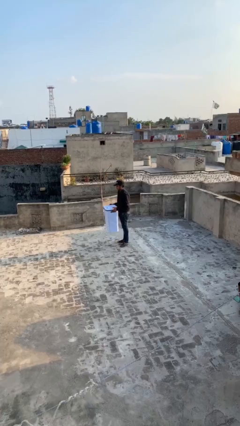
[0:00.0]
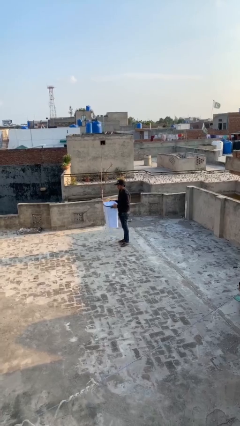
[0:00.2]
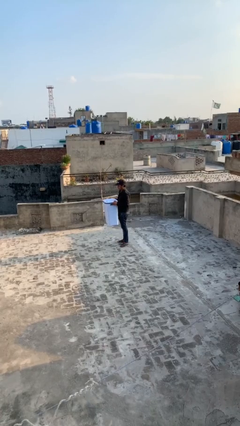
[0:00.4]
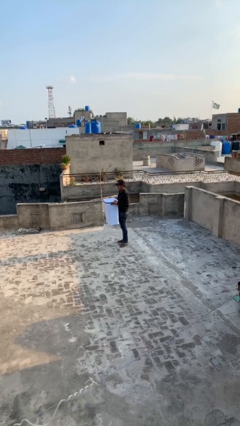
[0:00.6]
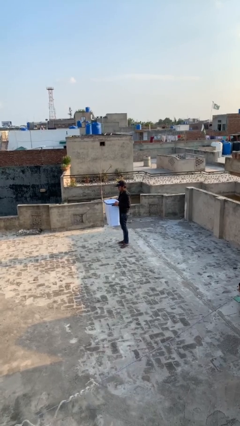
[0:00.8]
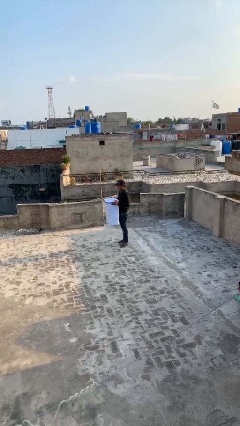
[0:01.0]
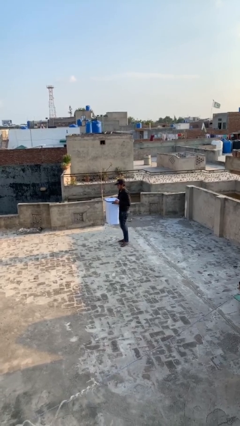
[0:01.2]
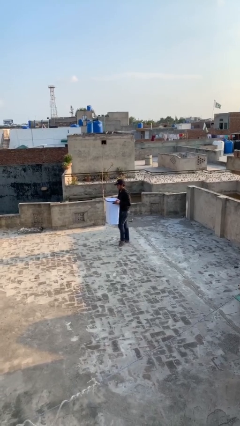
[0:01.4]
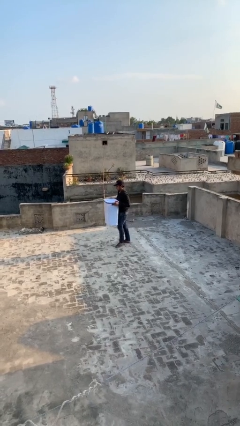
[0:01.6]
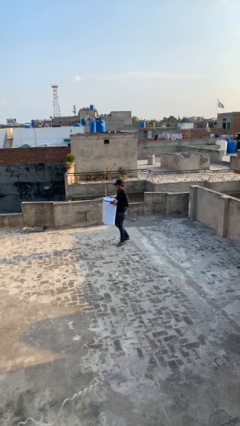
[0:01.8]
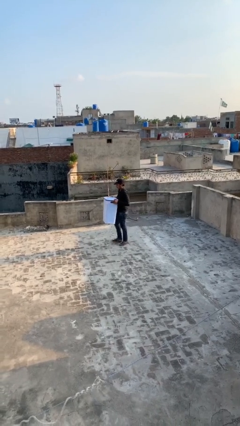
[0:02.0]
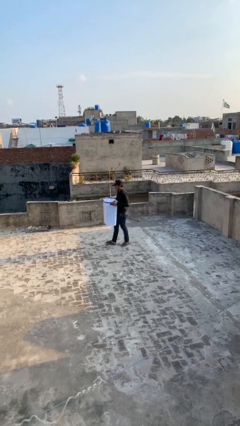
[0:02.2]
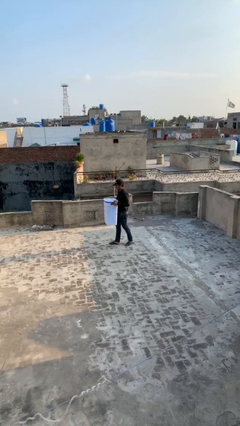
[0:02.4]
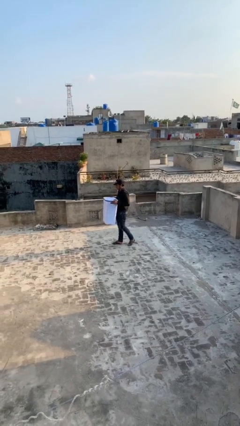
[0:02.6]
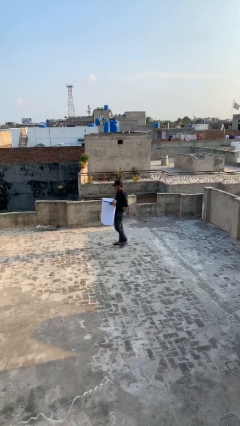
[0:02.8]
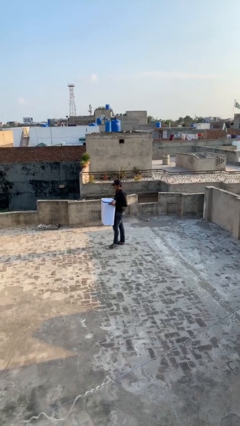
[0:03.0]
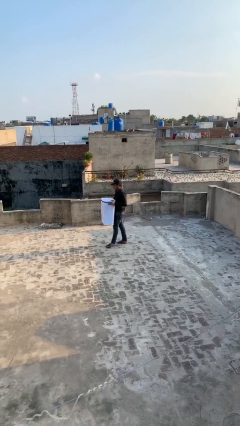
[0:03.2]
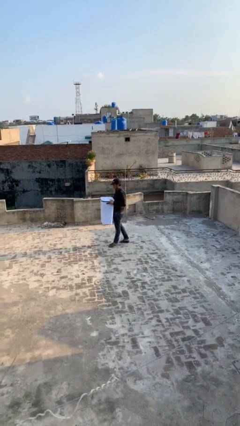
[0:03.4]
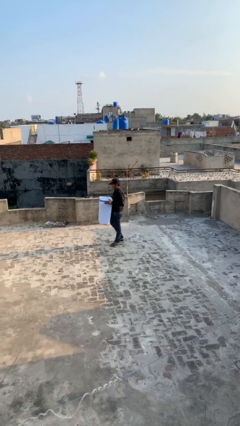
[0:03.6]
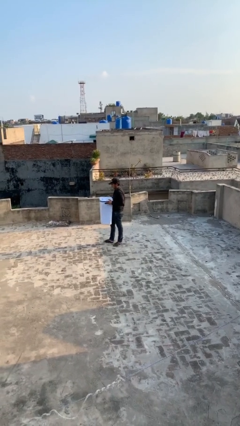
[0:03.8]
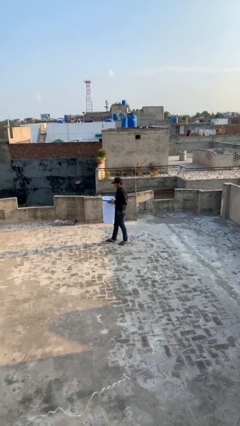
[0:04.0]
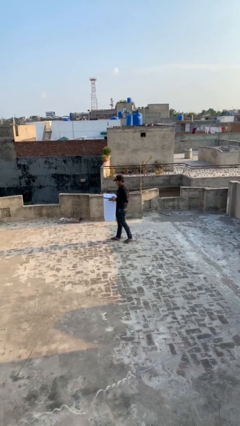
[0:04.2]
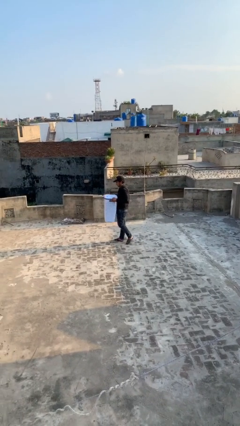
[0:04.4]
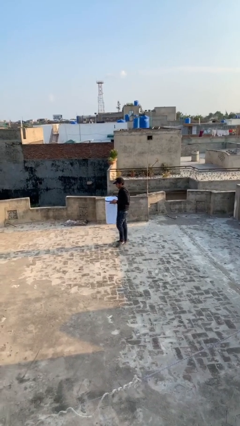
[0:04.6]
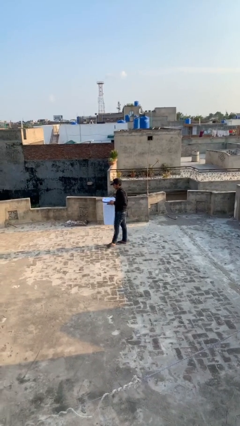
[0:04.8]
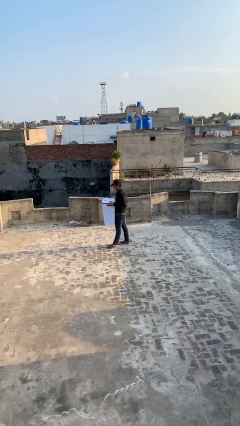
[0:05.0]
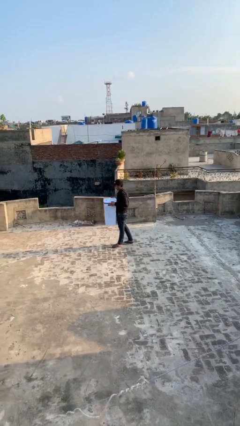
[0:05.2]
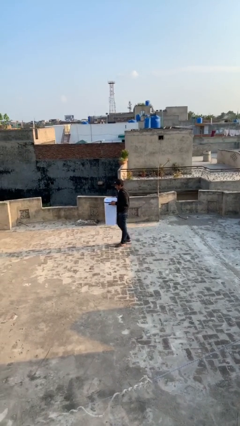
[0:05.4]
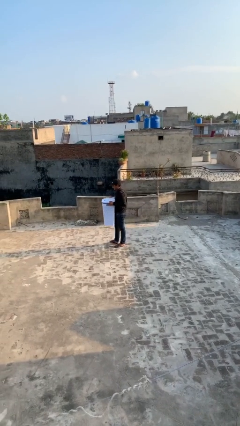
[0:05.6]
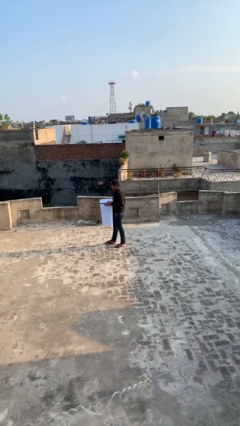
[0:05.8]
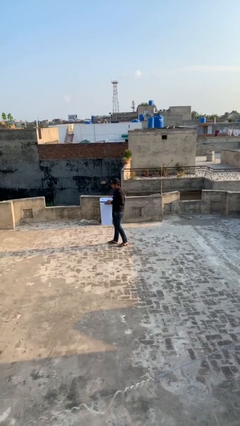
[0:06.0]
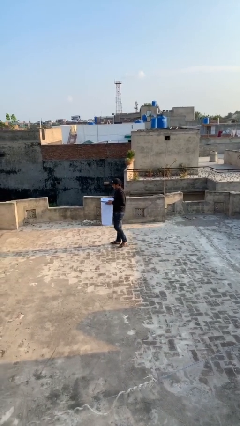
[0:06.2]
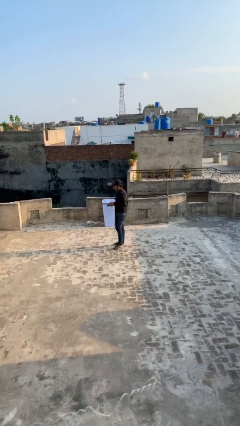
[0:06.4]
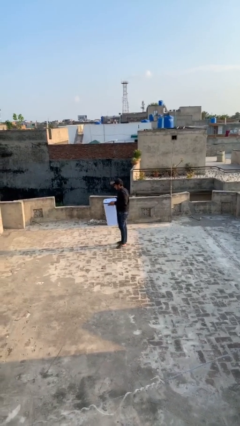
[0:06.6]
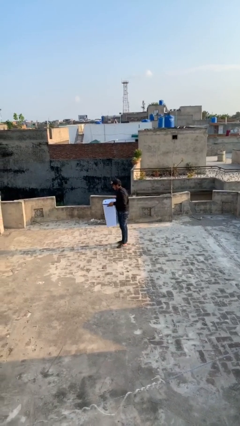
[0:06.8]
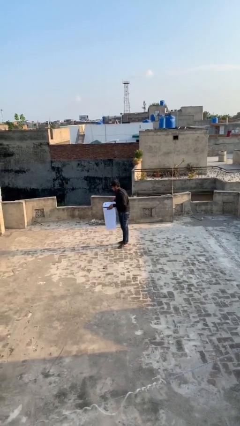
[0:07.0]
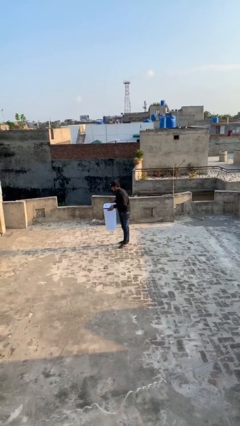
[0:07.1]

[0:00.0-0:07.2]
person carries heavy object

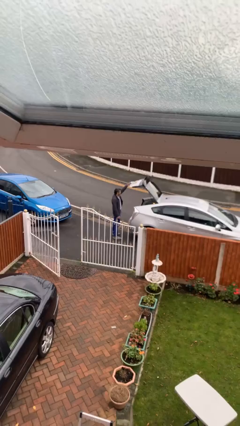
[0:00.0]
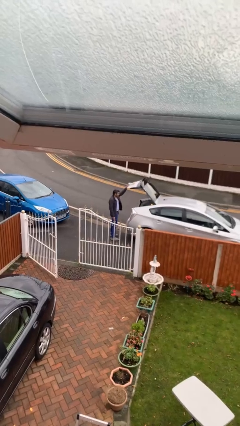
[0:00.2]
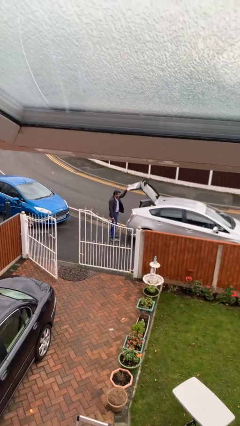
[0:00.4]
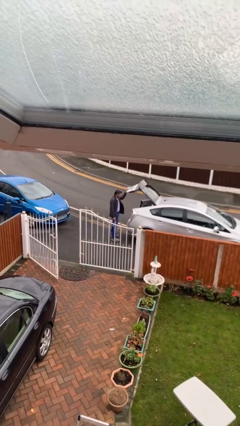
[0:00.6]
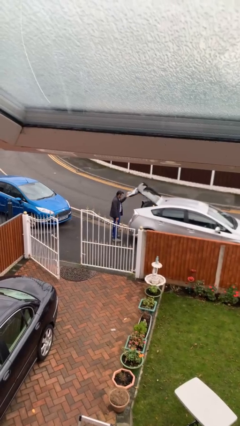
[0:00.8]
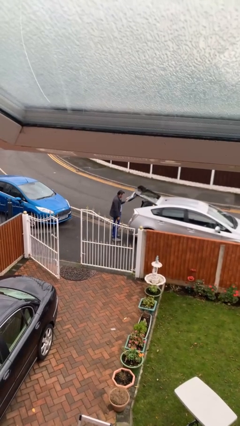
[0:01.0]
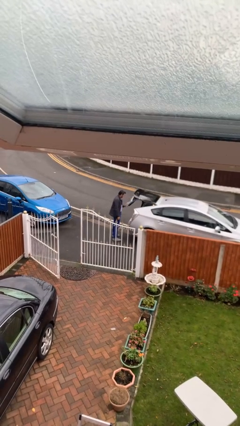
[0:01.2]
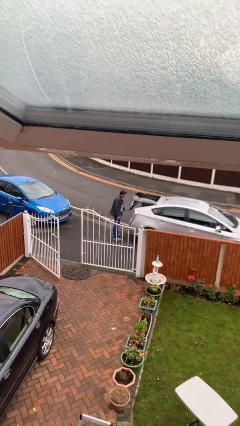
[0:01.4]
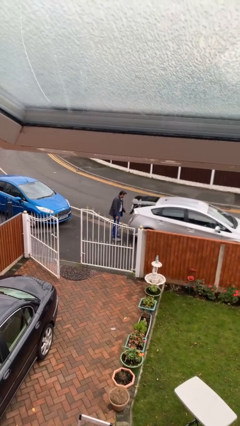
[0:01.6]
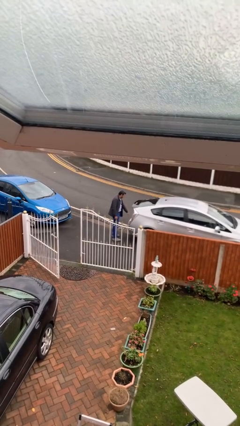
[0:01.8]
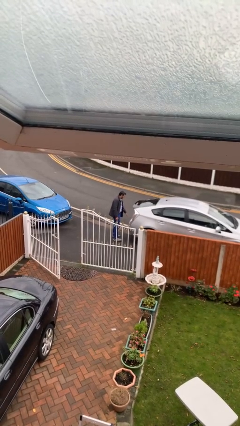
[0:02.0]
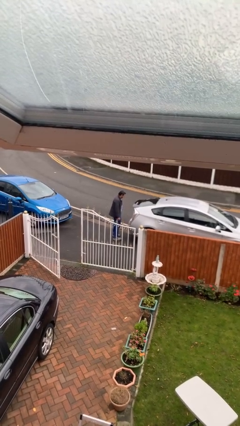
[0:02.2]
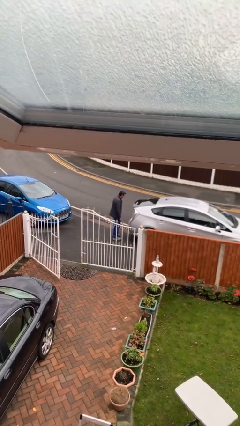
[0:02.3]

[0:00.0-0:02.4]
person closes car trunk

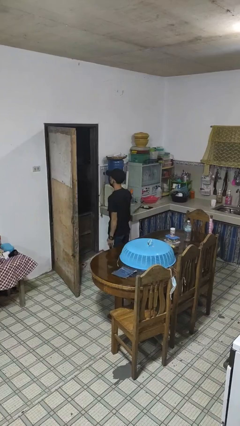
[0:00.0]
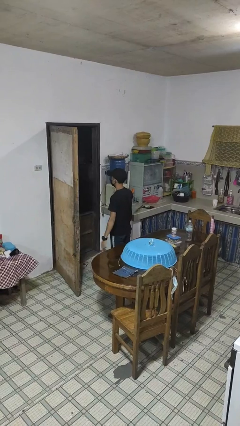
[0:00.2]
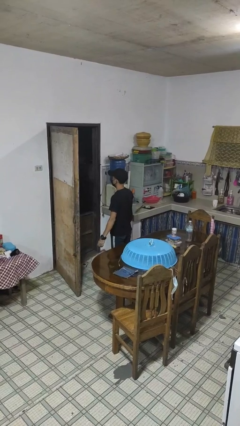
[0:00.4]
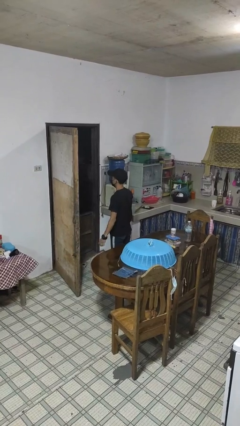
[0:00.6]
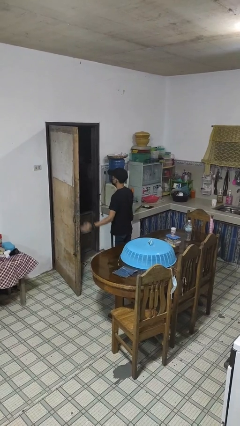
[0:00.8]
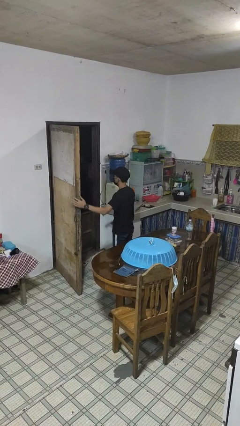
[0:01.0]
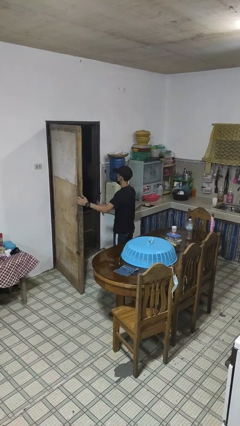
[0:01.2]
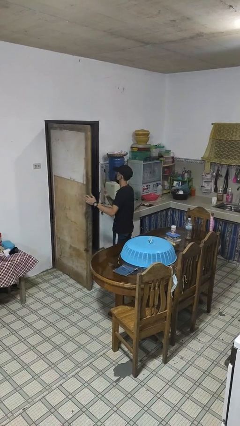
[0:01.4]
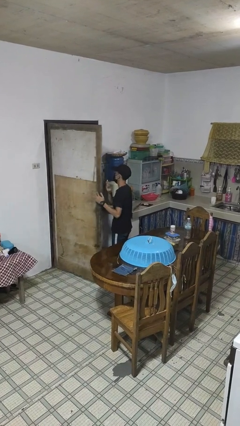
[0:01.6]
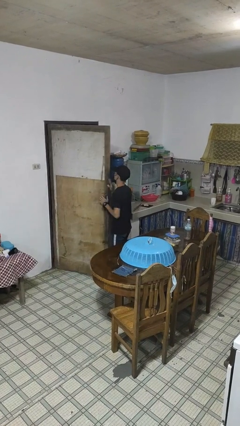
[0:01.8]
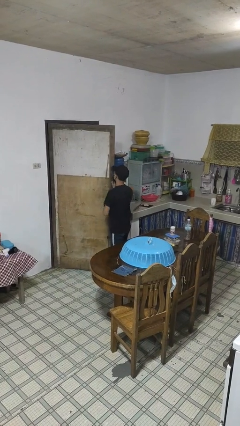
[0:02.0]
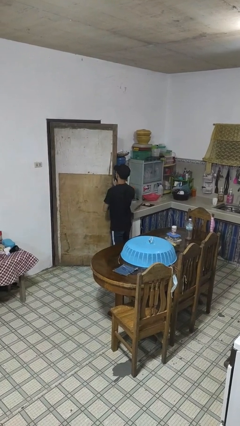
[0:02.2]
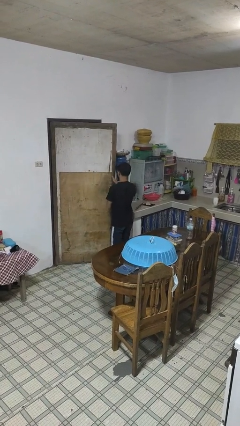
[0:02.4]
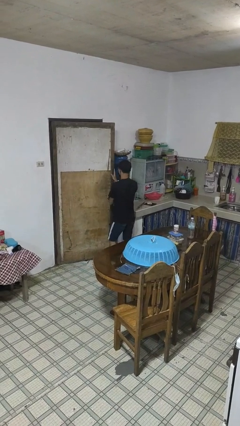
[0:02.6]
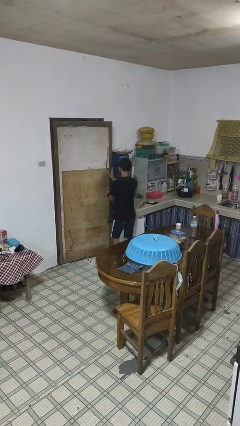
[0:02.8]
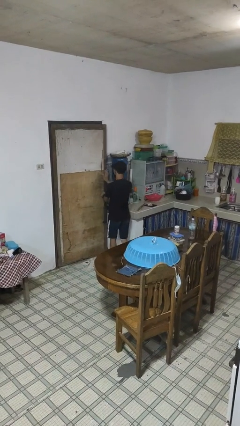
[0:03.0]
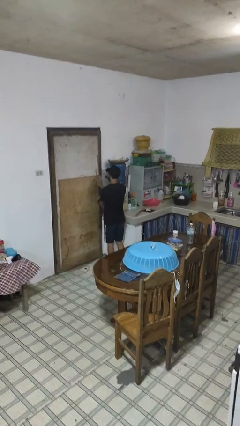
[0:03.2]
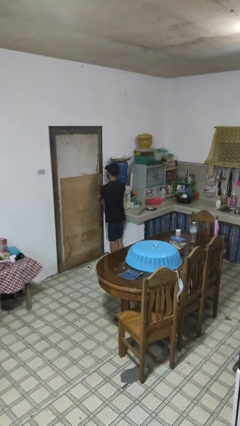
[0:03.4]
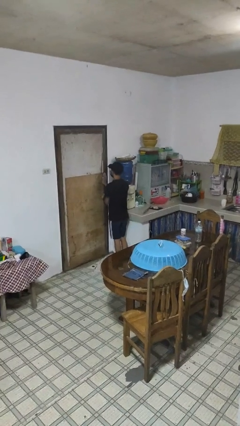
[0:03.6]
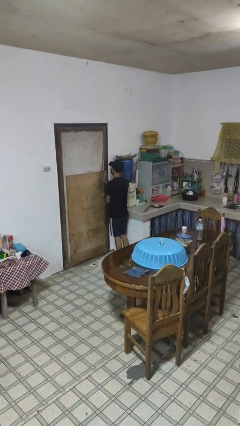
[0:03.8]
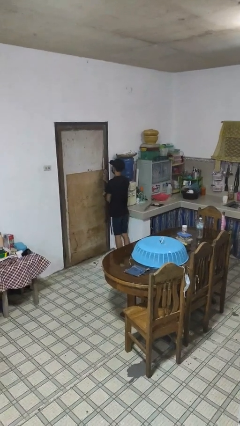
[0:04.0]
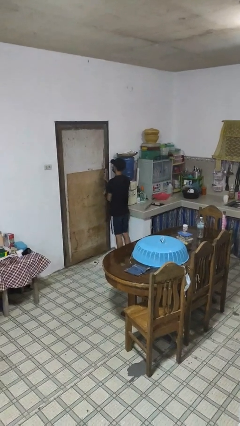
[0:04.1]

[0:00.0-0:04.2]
person closes facility door

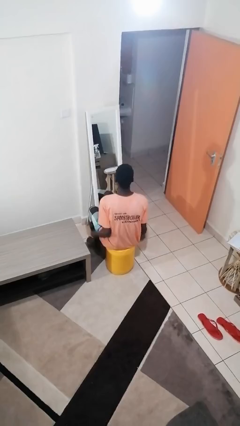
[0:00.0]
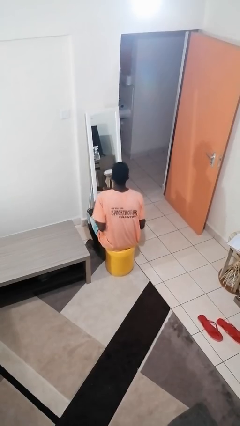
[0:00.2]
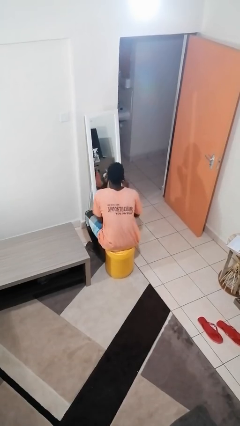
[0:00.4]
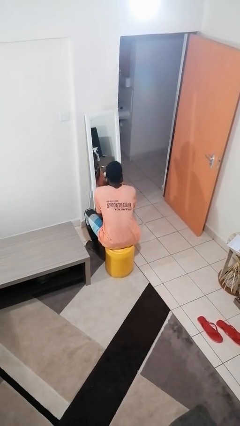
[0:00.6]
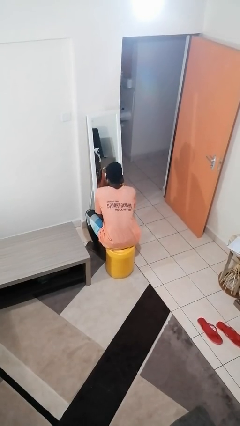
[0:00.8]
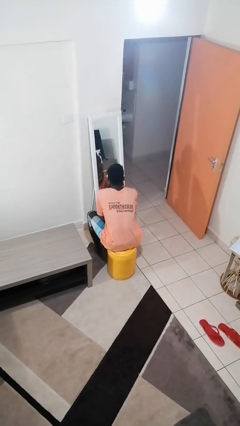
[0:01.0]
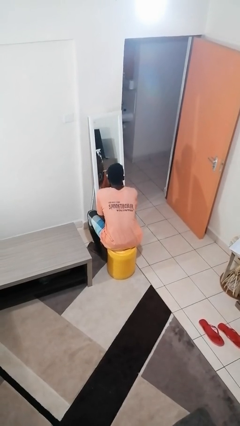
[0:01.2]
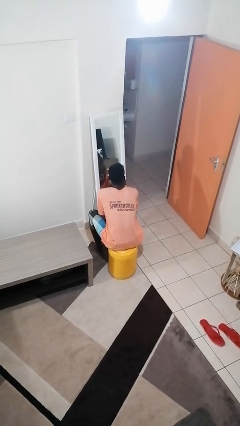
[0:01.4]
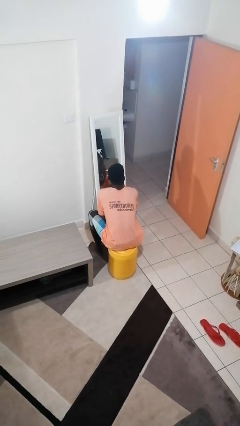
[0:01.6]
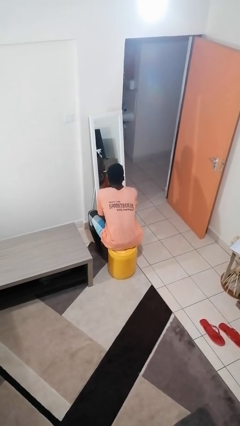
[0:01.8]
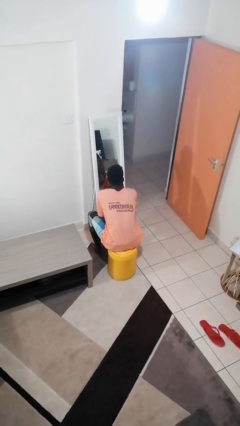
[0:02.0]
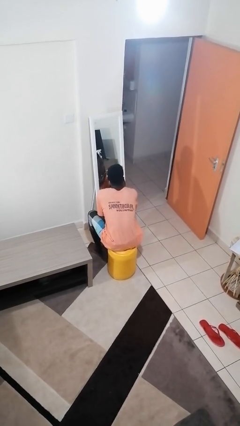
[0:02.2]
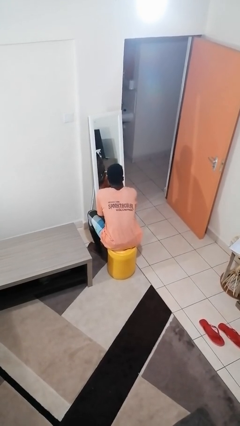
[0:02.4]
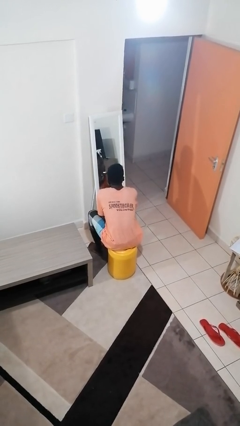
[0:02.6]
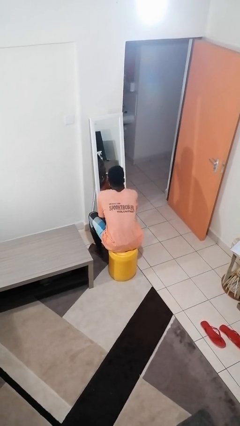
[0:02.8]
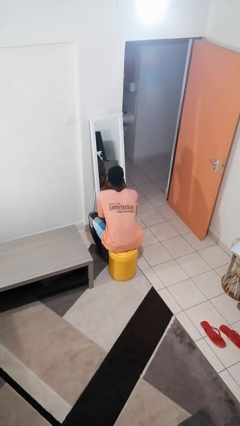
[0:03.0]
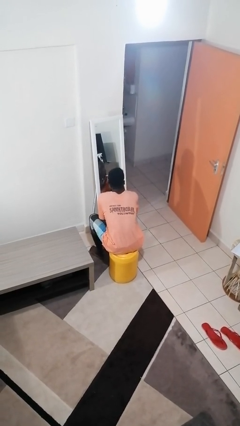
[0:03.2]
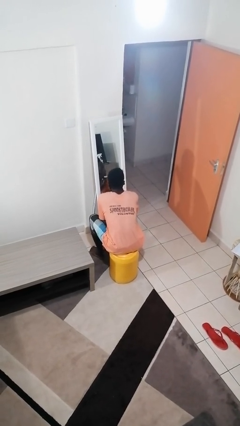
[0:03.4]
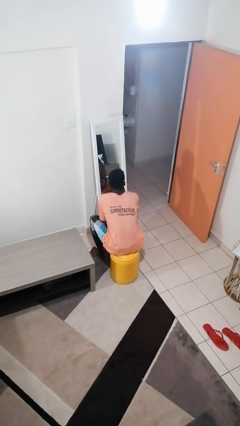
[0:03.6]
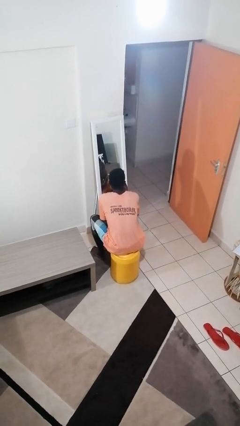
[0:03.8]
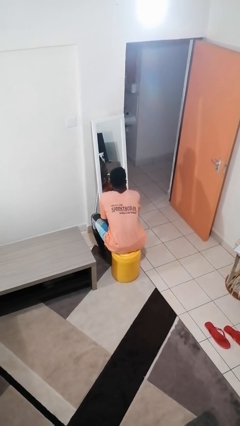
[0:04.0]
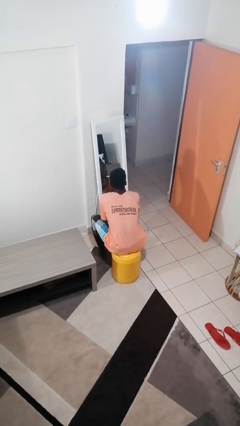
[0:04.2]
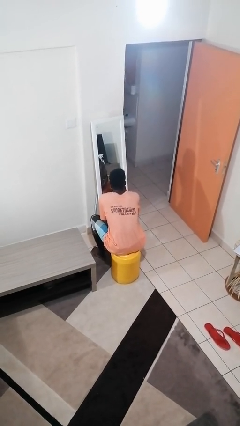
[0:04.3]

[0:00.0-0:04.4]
person applies lip makeup
